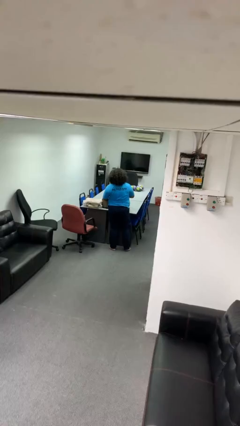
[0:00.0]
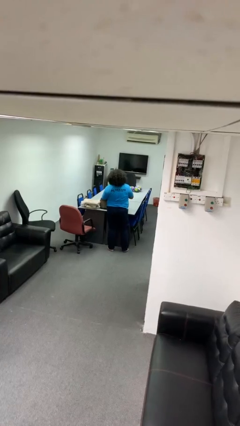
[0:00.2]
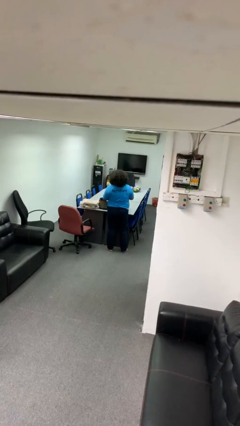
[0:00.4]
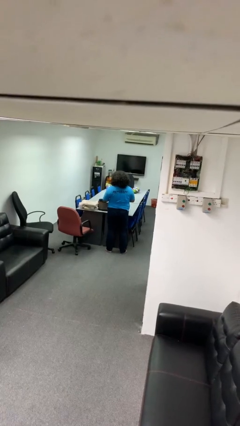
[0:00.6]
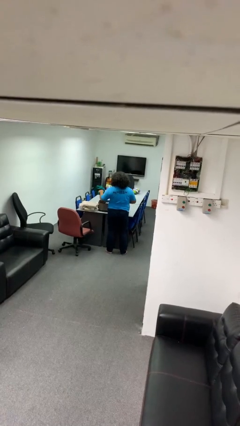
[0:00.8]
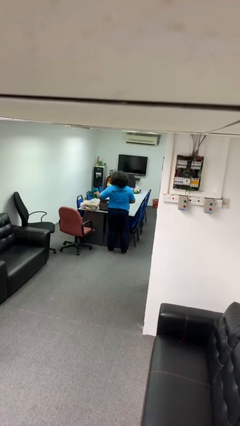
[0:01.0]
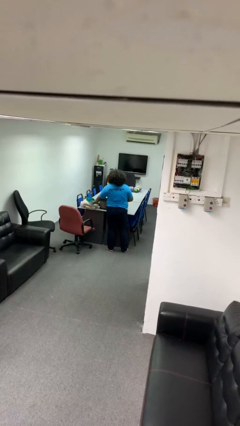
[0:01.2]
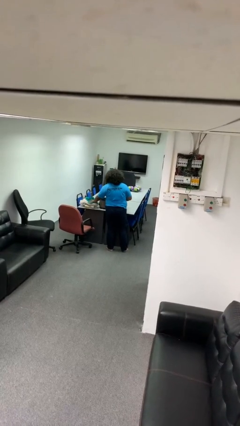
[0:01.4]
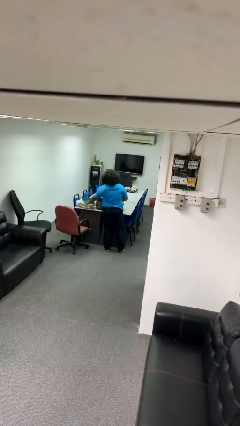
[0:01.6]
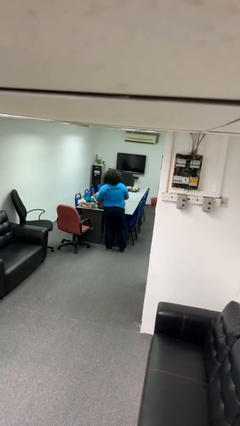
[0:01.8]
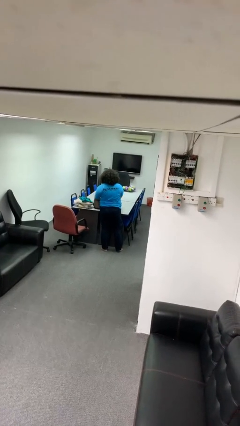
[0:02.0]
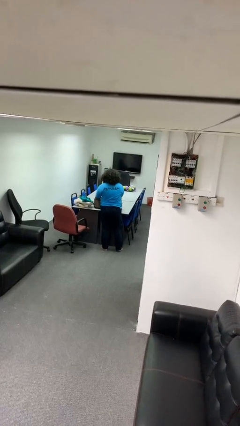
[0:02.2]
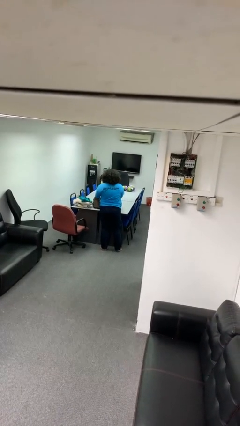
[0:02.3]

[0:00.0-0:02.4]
person unloads clothes from suitcase

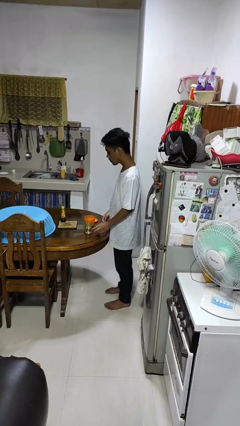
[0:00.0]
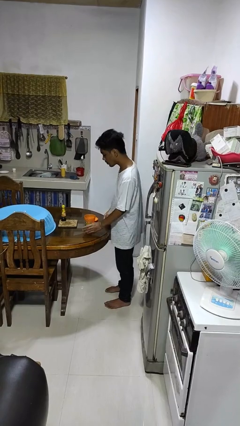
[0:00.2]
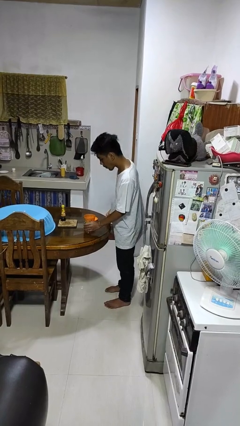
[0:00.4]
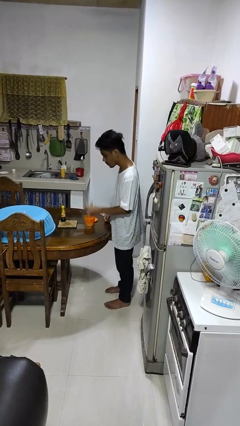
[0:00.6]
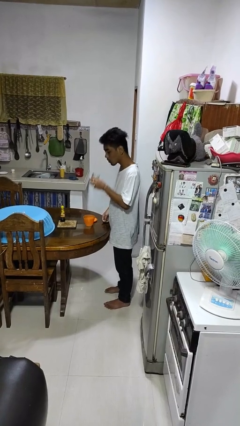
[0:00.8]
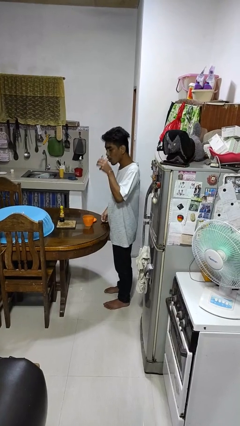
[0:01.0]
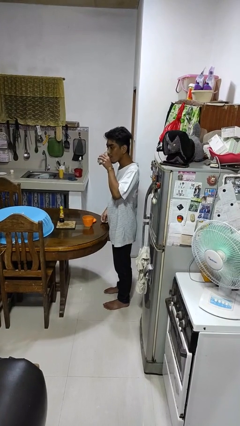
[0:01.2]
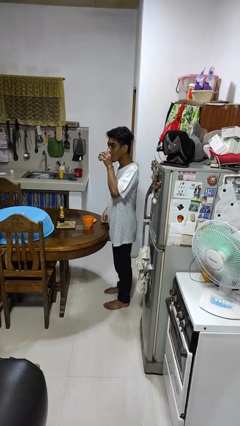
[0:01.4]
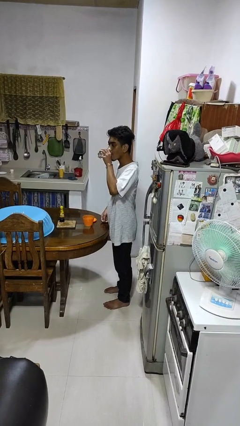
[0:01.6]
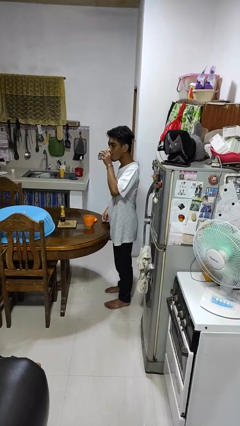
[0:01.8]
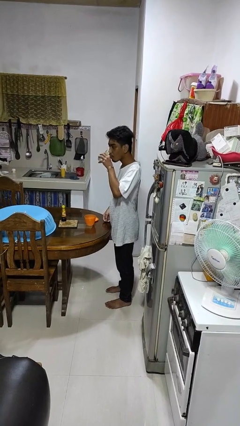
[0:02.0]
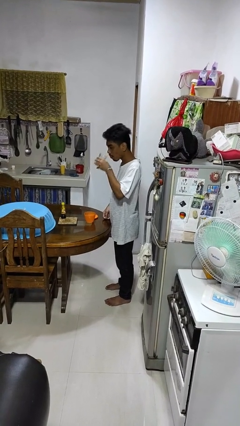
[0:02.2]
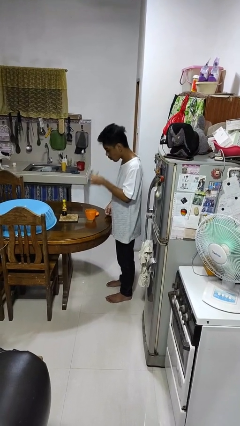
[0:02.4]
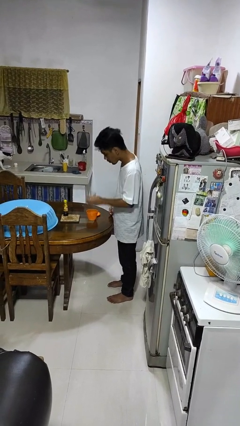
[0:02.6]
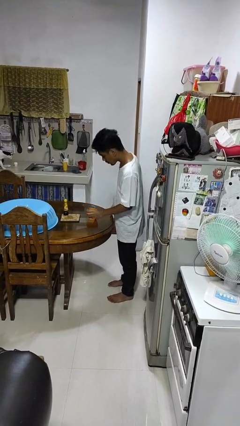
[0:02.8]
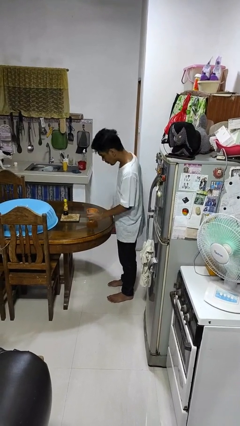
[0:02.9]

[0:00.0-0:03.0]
person drinks from cup

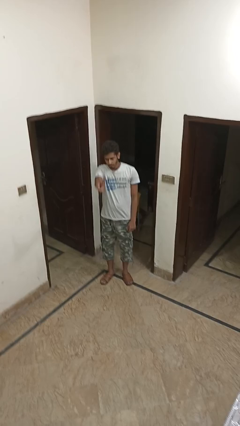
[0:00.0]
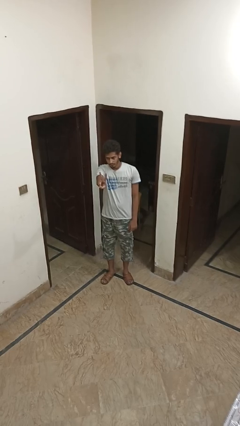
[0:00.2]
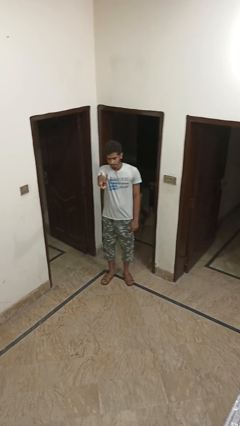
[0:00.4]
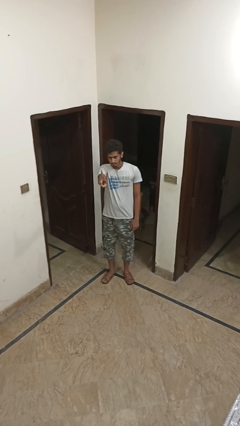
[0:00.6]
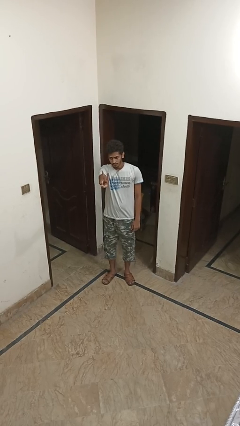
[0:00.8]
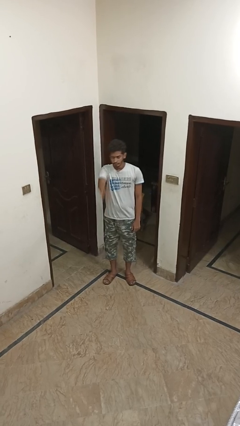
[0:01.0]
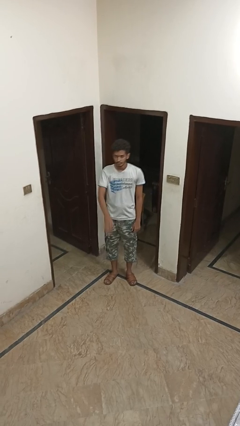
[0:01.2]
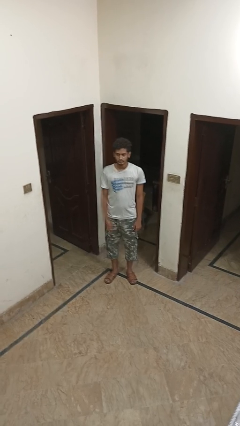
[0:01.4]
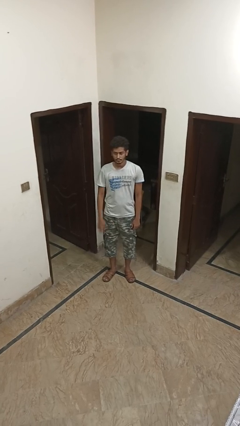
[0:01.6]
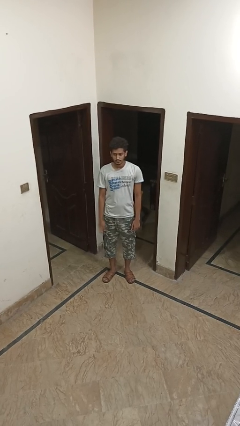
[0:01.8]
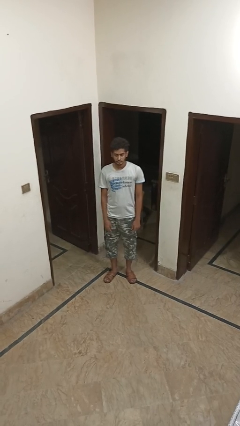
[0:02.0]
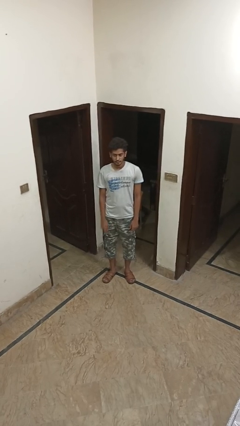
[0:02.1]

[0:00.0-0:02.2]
person gestures peace

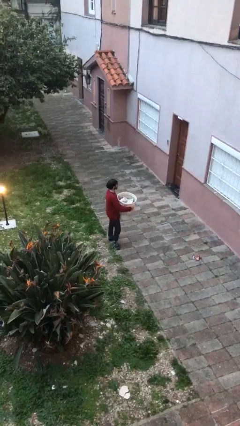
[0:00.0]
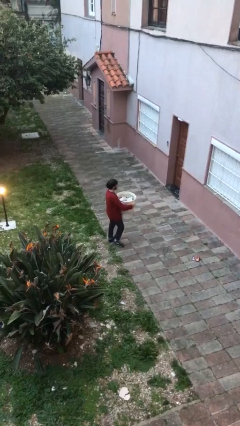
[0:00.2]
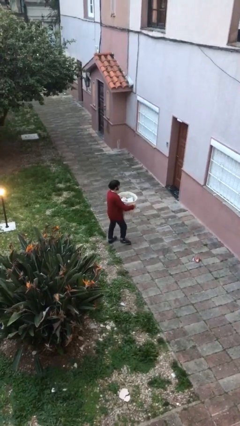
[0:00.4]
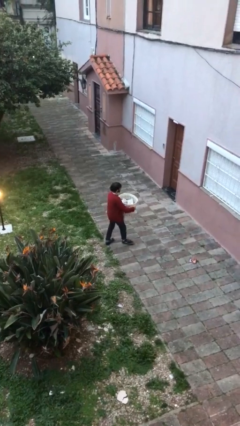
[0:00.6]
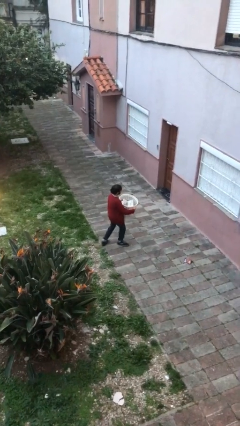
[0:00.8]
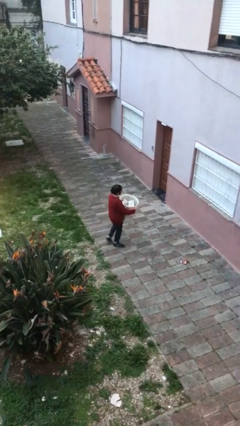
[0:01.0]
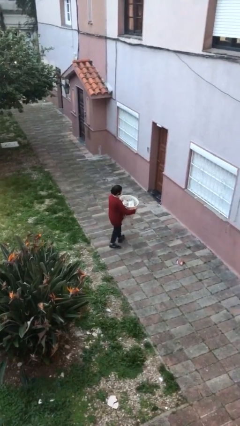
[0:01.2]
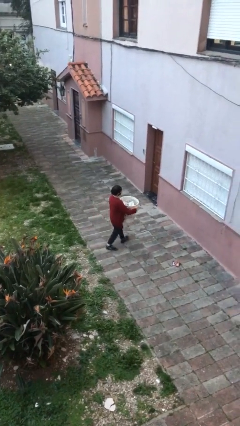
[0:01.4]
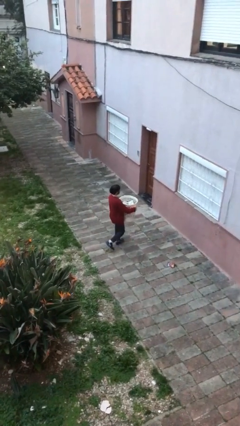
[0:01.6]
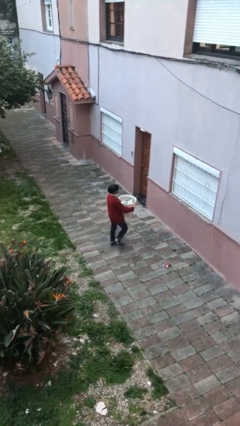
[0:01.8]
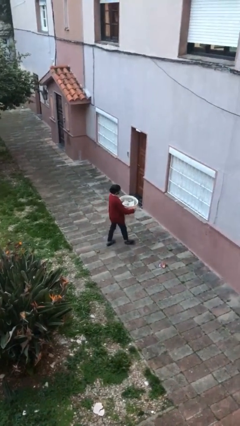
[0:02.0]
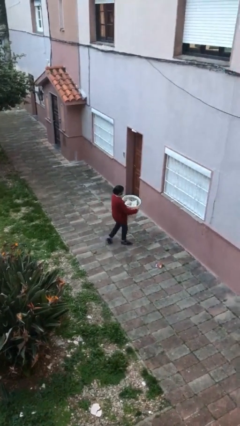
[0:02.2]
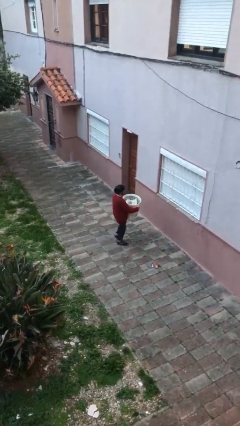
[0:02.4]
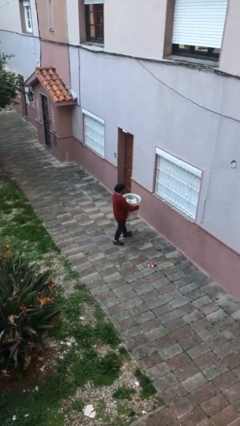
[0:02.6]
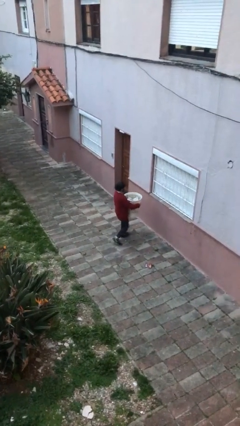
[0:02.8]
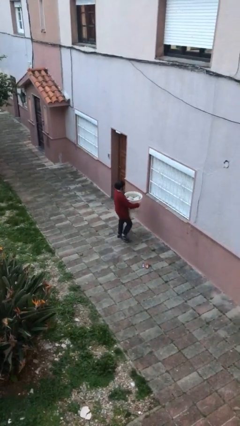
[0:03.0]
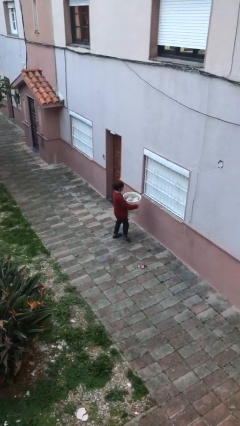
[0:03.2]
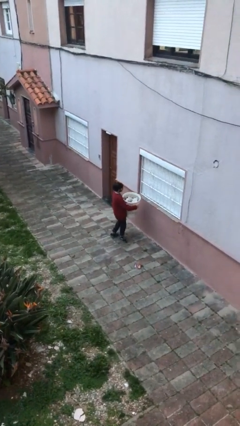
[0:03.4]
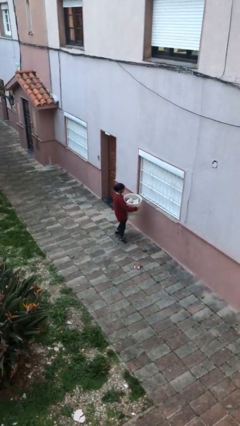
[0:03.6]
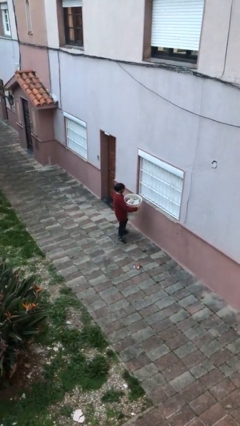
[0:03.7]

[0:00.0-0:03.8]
person carries laundry basket

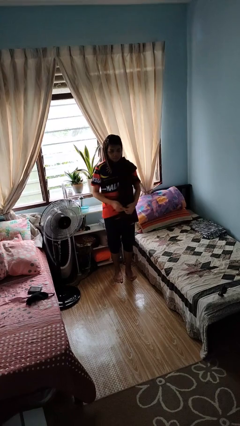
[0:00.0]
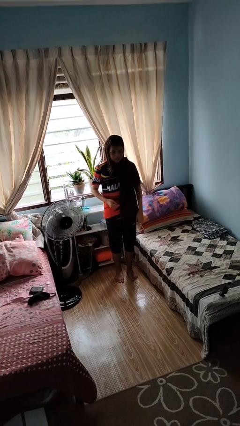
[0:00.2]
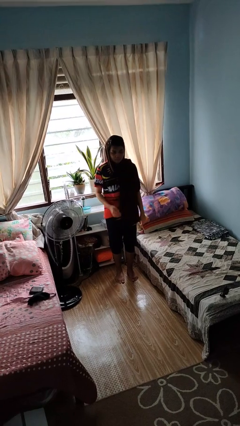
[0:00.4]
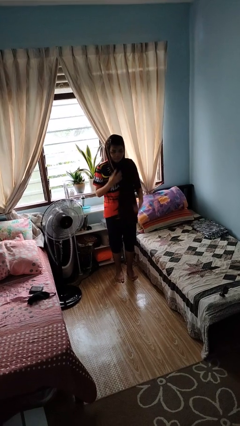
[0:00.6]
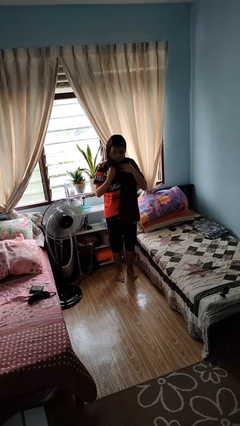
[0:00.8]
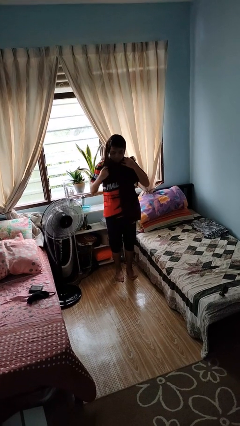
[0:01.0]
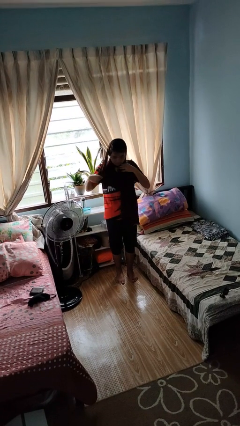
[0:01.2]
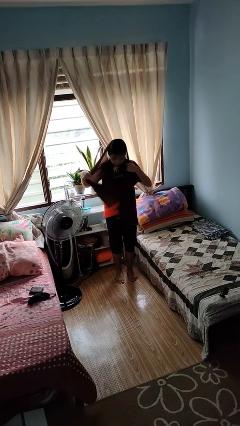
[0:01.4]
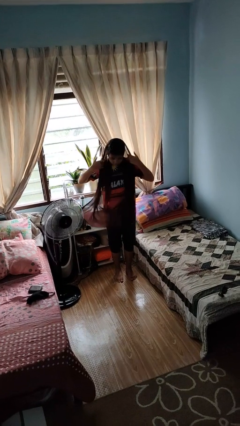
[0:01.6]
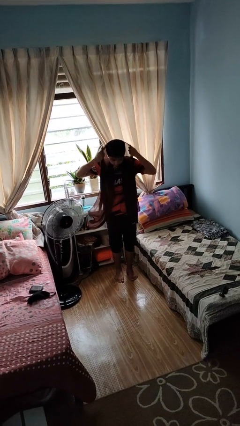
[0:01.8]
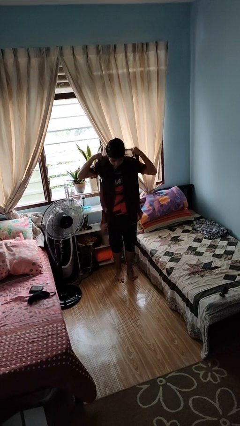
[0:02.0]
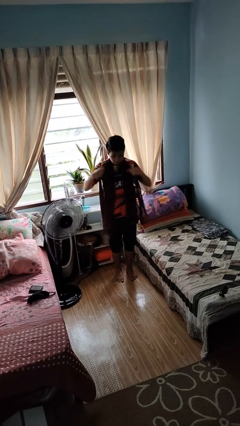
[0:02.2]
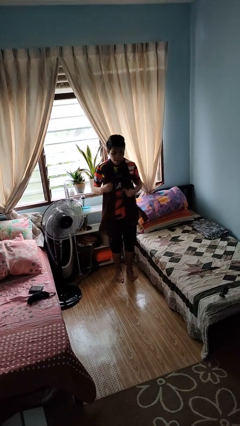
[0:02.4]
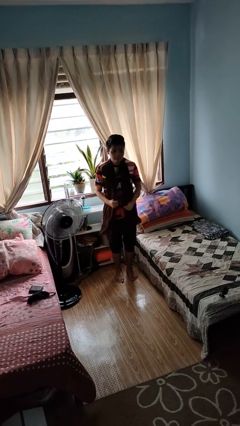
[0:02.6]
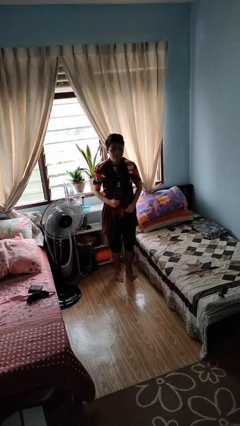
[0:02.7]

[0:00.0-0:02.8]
person takes off scarf

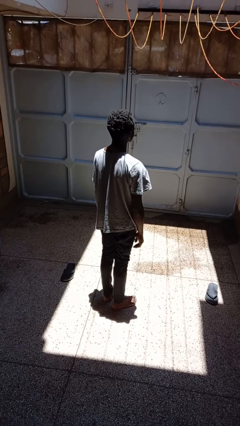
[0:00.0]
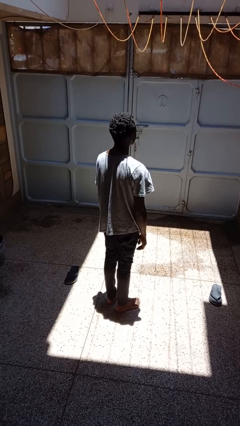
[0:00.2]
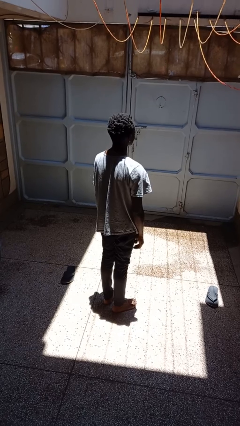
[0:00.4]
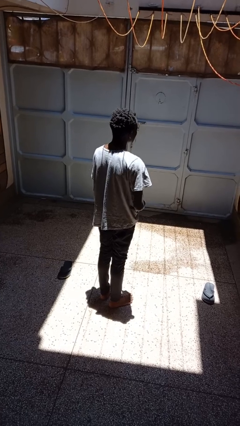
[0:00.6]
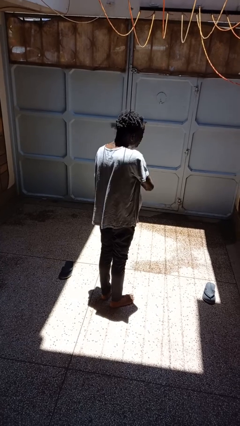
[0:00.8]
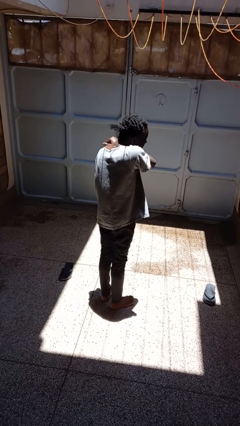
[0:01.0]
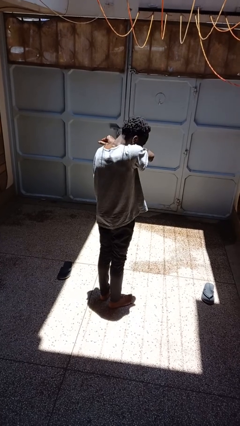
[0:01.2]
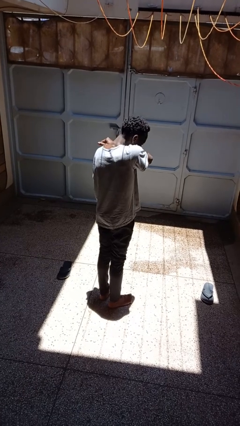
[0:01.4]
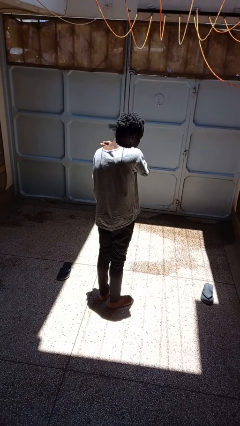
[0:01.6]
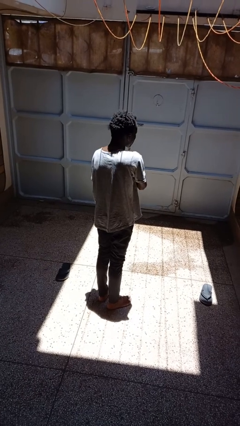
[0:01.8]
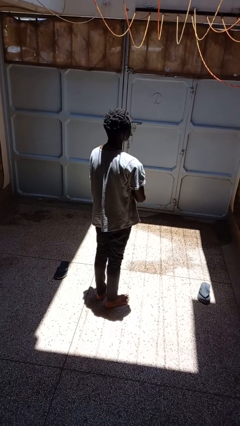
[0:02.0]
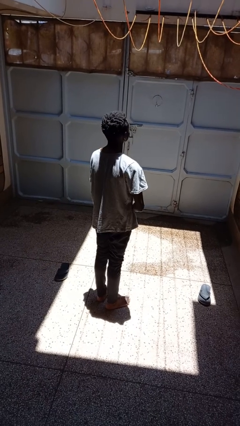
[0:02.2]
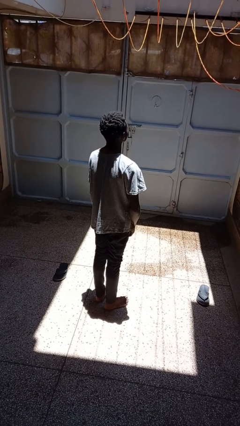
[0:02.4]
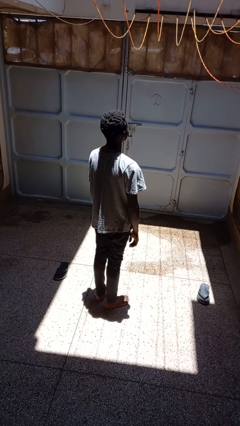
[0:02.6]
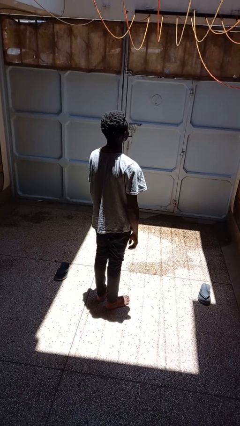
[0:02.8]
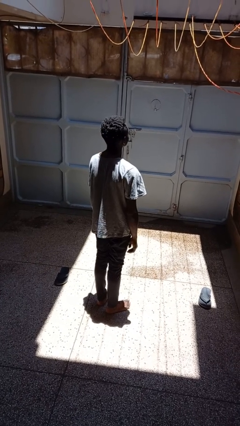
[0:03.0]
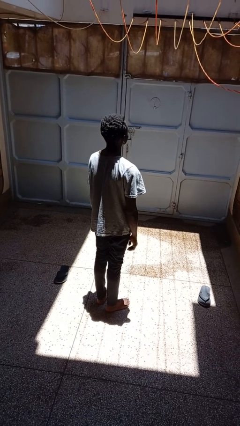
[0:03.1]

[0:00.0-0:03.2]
person sneezes into arm
